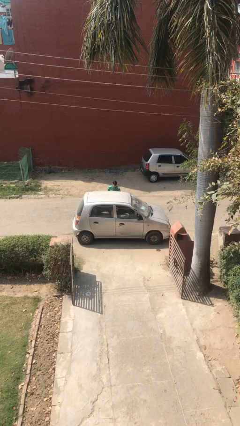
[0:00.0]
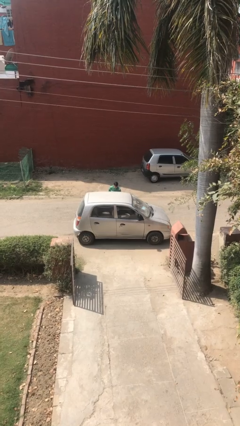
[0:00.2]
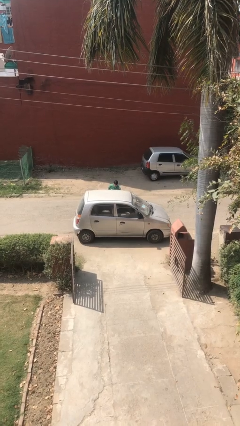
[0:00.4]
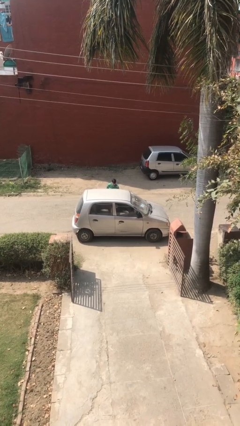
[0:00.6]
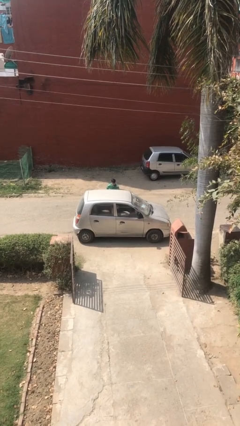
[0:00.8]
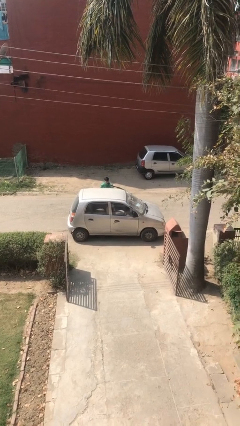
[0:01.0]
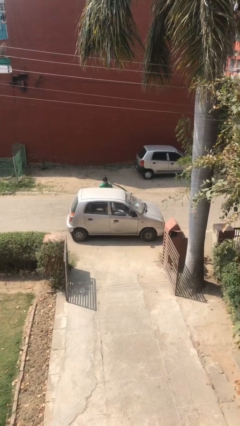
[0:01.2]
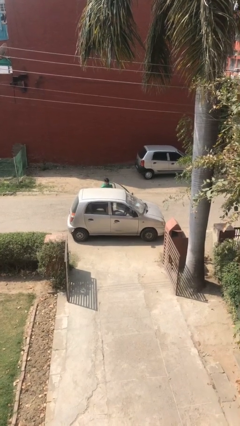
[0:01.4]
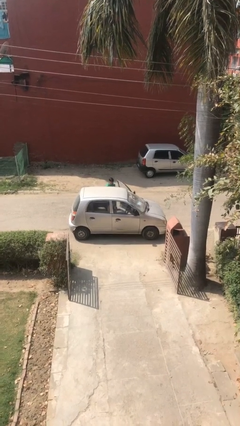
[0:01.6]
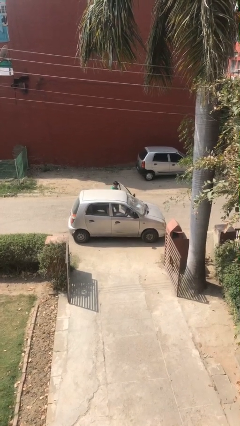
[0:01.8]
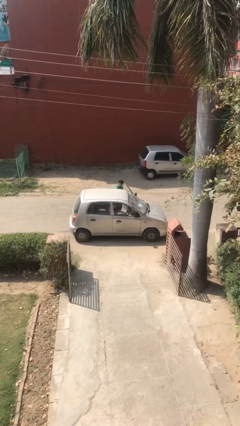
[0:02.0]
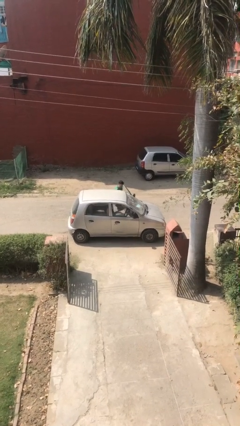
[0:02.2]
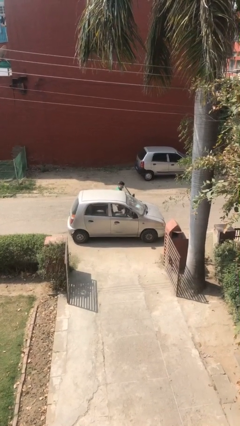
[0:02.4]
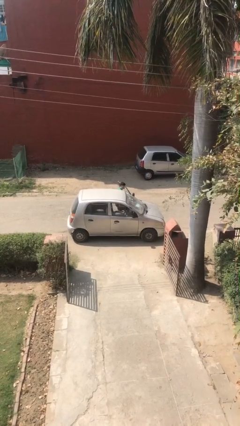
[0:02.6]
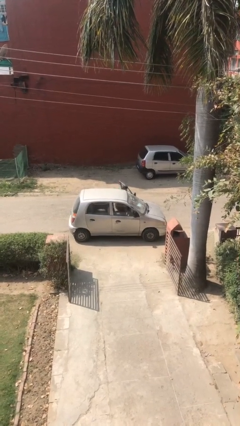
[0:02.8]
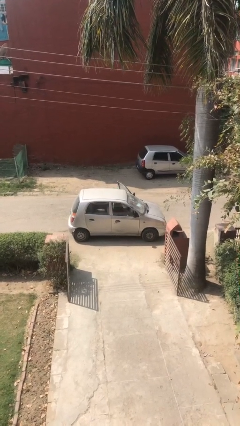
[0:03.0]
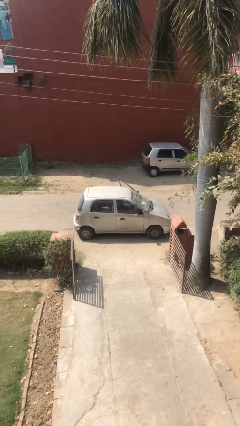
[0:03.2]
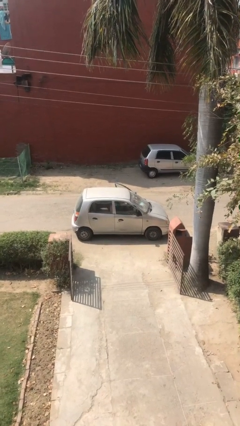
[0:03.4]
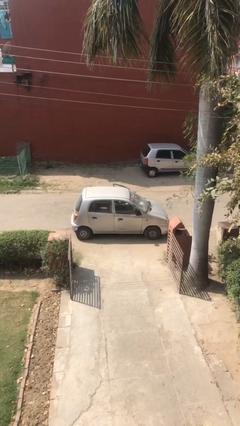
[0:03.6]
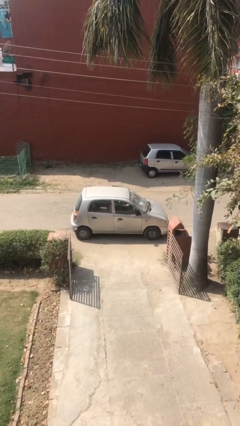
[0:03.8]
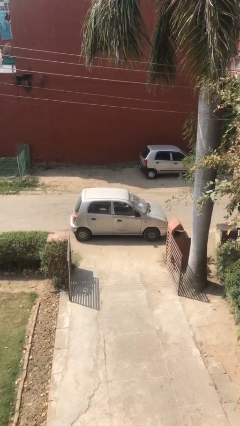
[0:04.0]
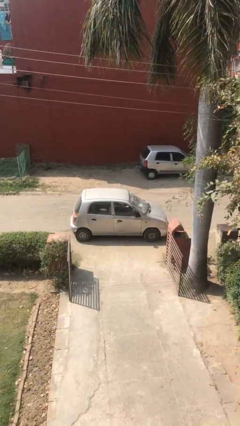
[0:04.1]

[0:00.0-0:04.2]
car picks up person

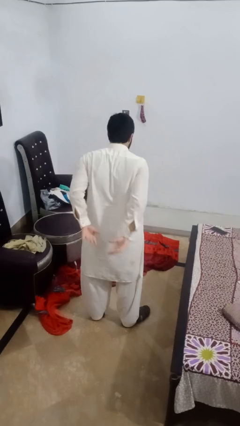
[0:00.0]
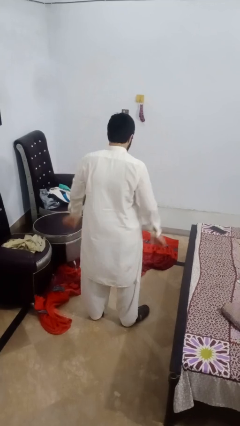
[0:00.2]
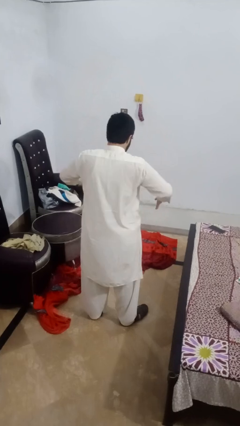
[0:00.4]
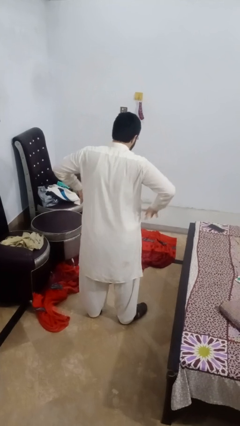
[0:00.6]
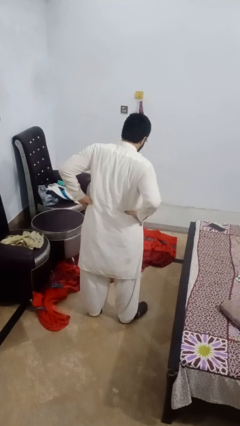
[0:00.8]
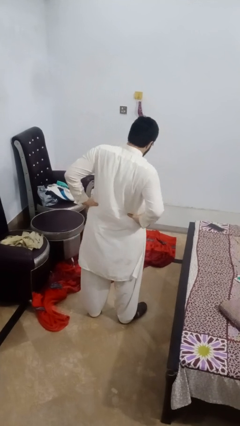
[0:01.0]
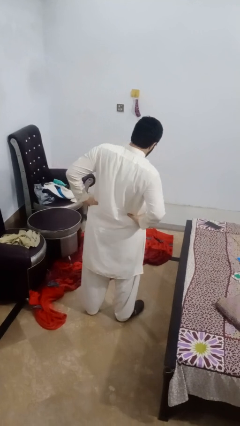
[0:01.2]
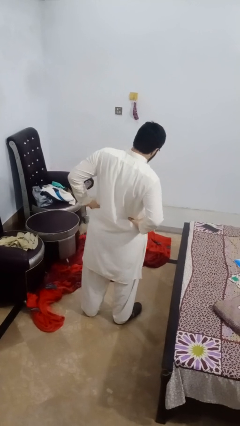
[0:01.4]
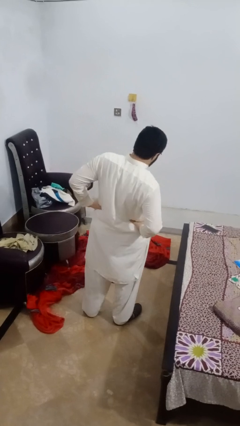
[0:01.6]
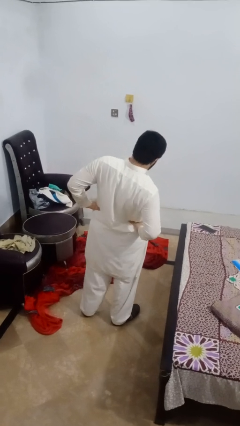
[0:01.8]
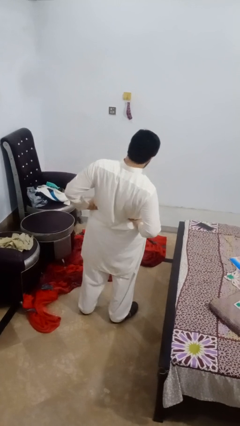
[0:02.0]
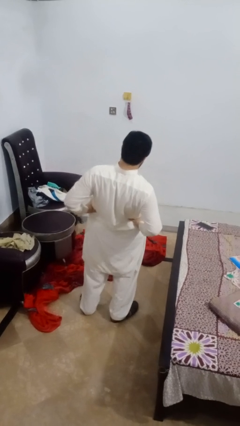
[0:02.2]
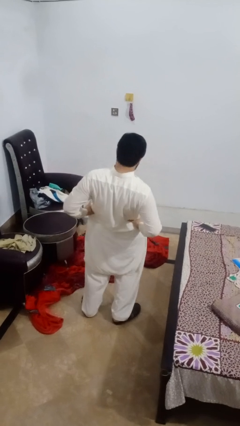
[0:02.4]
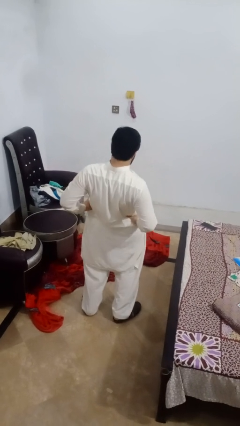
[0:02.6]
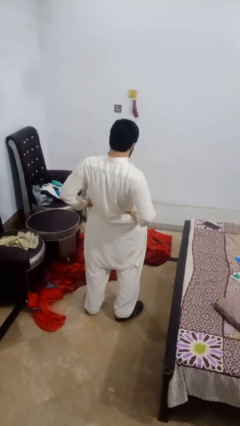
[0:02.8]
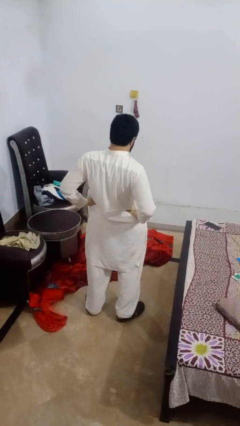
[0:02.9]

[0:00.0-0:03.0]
person stretches back

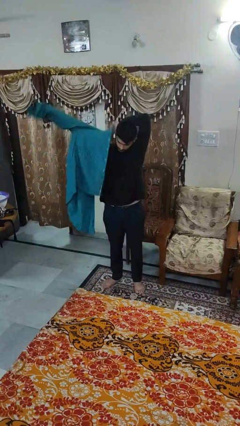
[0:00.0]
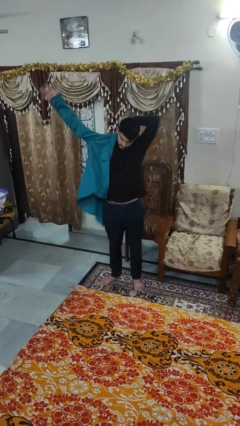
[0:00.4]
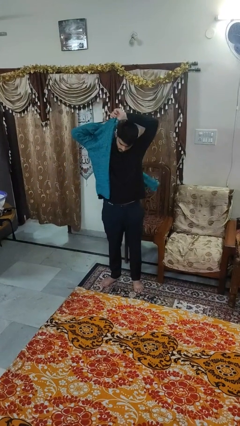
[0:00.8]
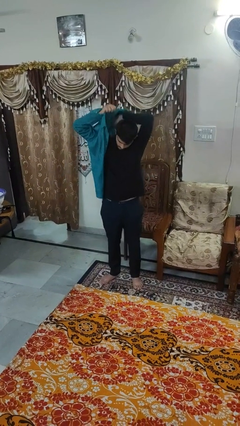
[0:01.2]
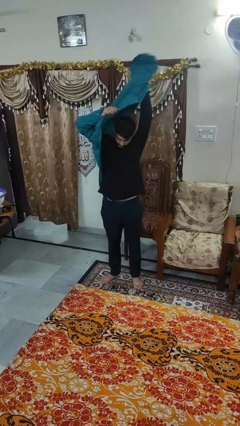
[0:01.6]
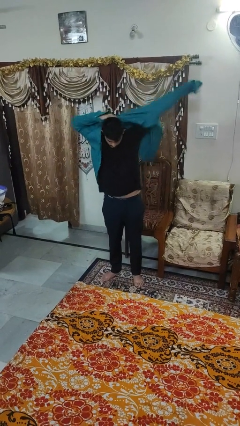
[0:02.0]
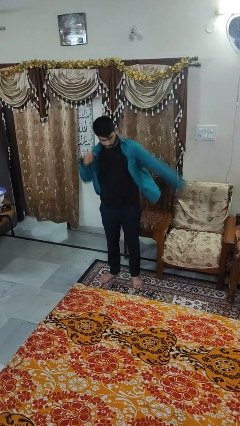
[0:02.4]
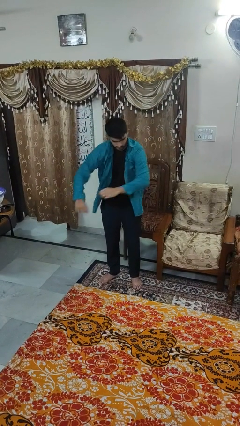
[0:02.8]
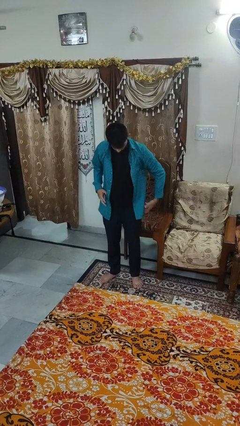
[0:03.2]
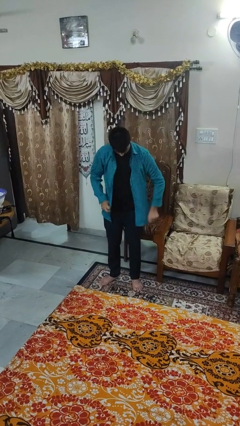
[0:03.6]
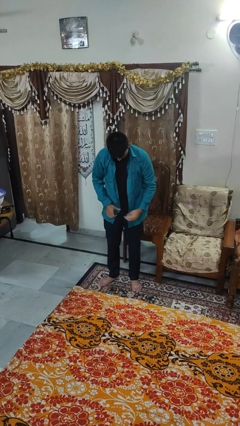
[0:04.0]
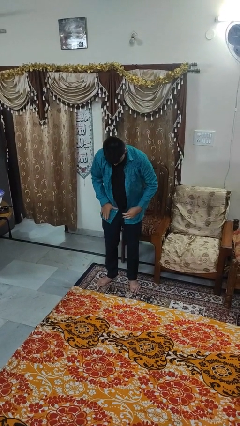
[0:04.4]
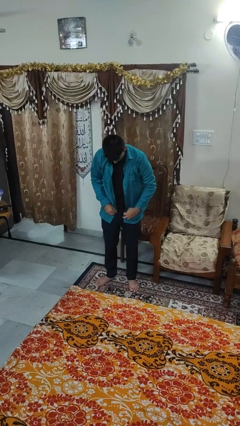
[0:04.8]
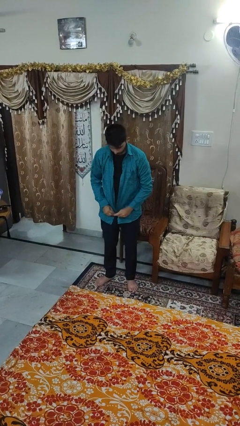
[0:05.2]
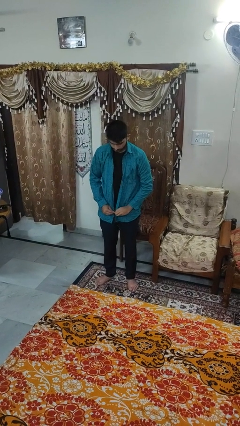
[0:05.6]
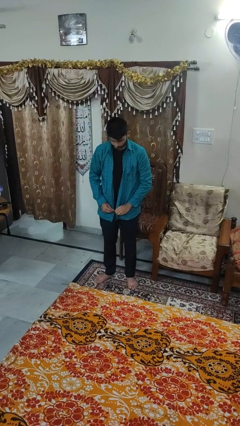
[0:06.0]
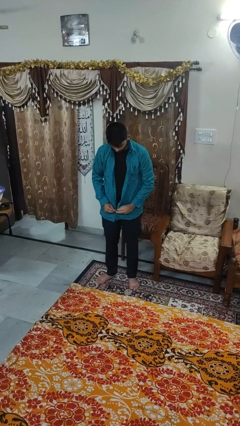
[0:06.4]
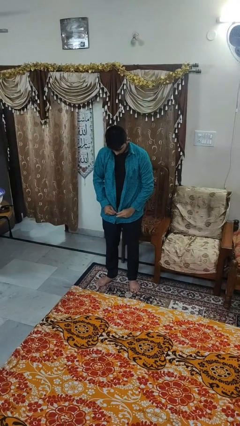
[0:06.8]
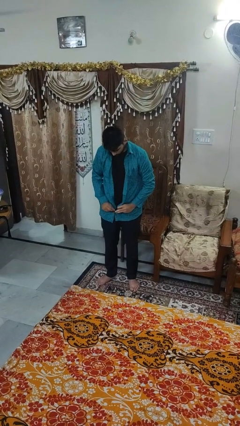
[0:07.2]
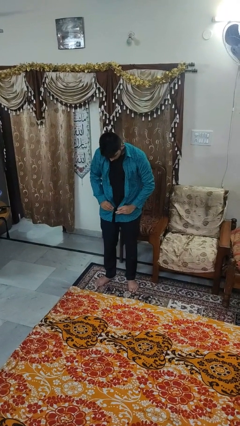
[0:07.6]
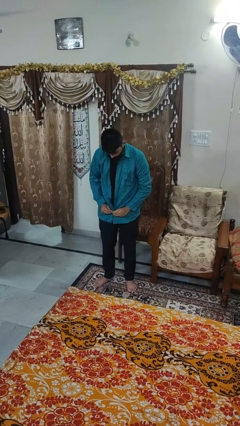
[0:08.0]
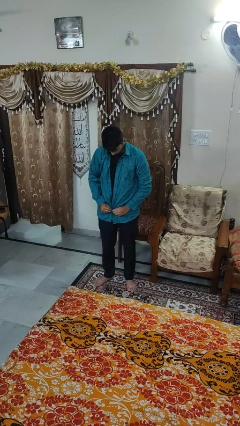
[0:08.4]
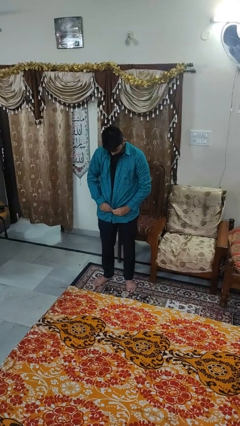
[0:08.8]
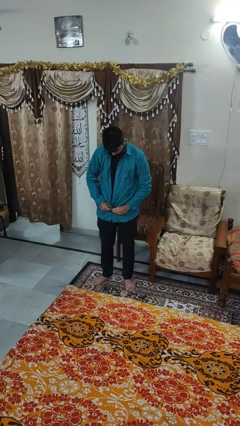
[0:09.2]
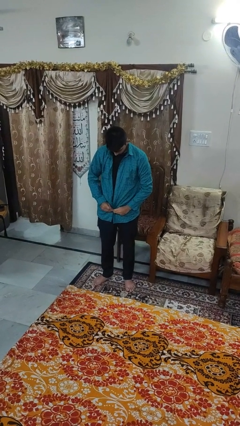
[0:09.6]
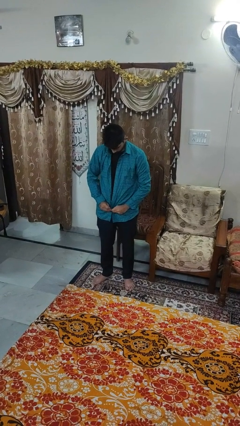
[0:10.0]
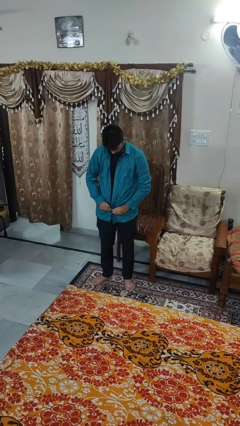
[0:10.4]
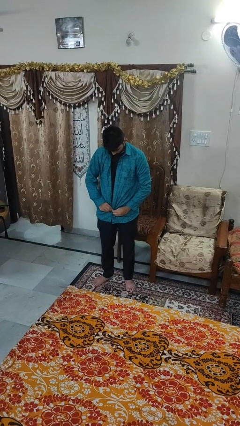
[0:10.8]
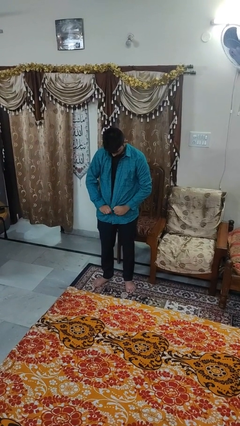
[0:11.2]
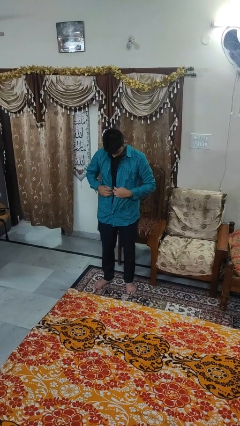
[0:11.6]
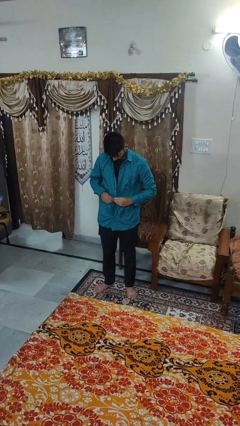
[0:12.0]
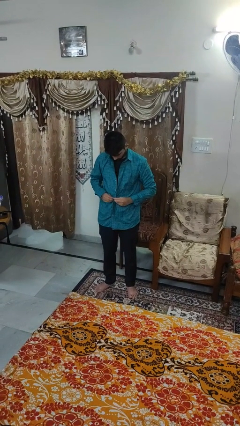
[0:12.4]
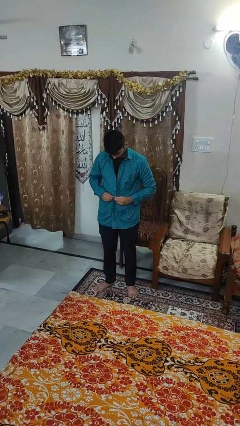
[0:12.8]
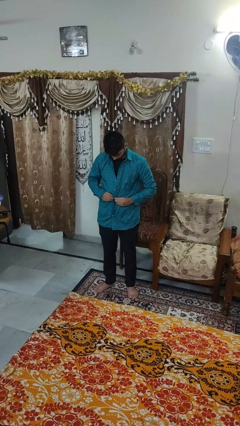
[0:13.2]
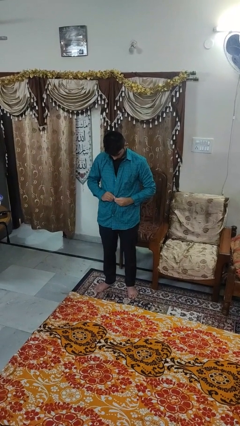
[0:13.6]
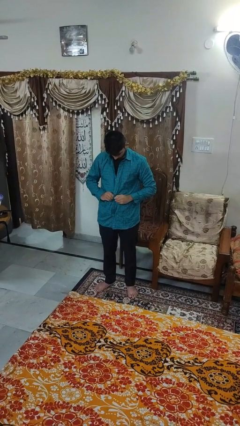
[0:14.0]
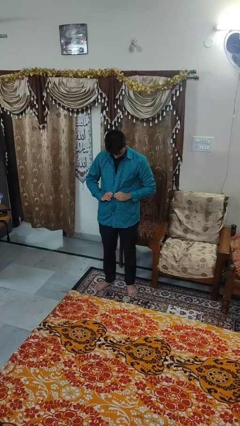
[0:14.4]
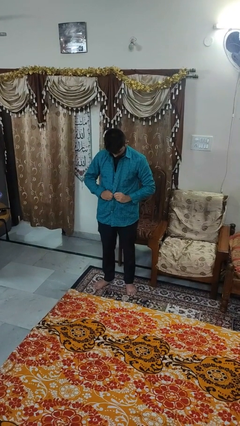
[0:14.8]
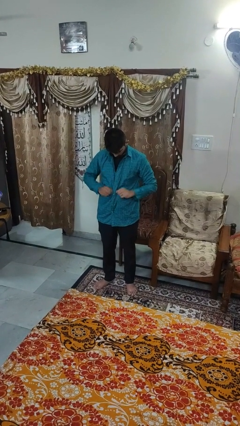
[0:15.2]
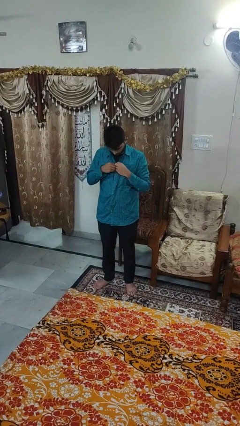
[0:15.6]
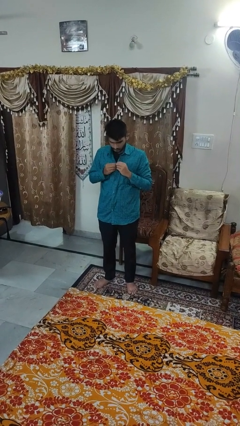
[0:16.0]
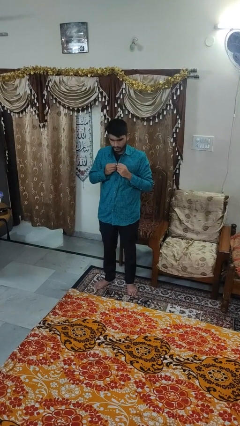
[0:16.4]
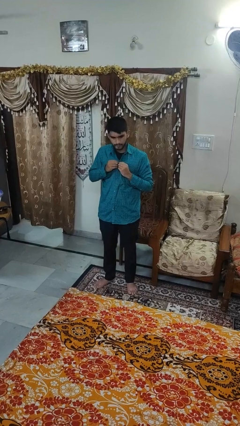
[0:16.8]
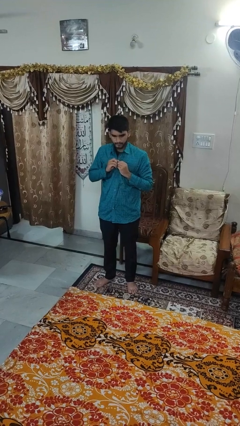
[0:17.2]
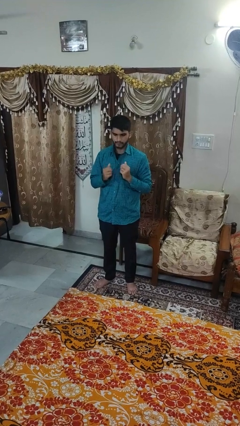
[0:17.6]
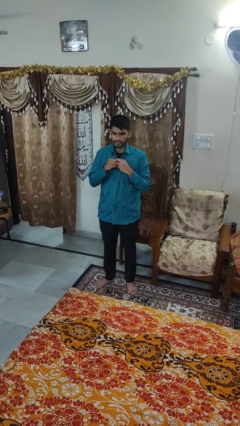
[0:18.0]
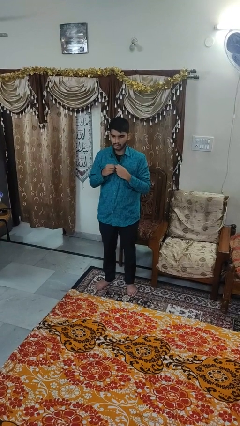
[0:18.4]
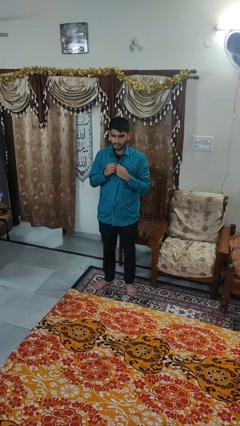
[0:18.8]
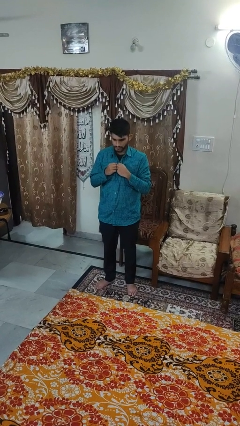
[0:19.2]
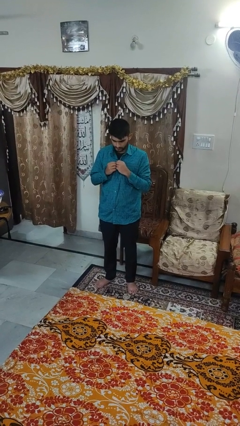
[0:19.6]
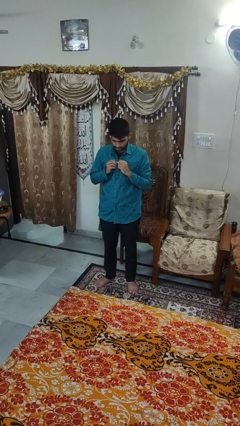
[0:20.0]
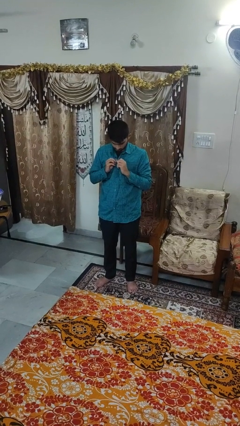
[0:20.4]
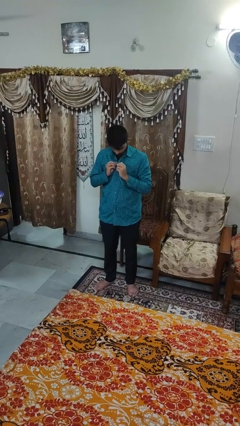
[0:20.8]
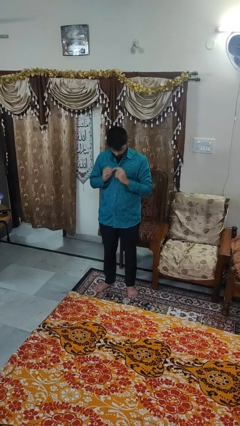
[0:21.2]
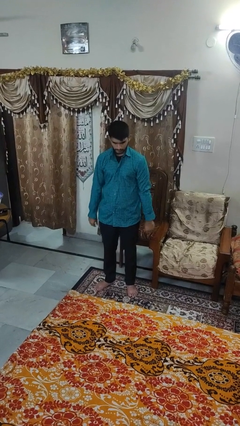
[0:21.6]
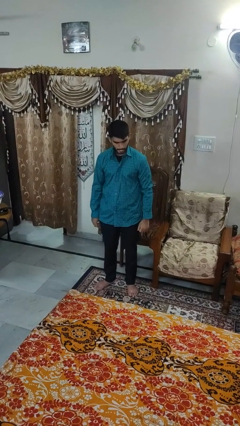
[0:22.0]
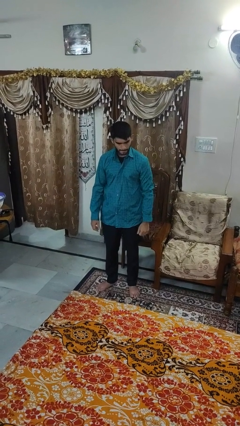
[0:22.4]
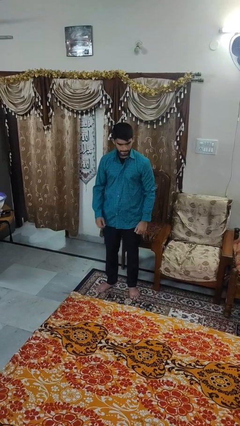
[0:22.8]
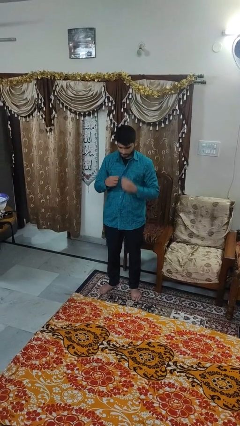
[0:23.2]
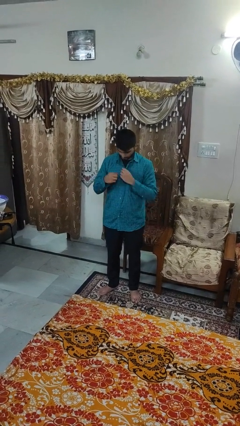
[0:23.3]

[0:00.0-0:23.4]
person puts on shirt
